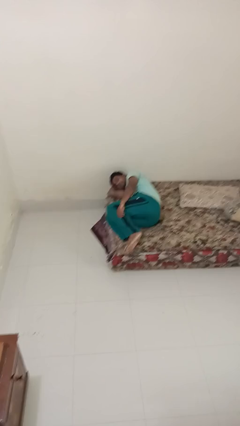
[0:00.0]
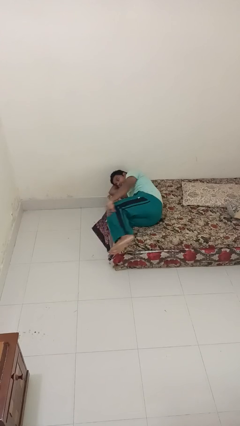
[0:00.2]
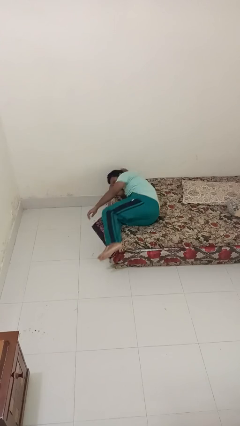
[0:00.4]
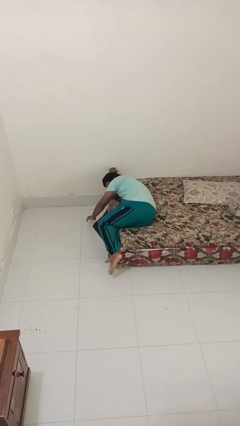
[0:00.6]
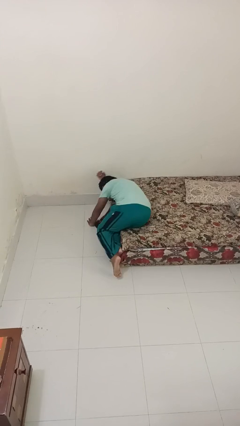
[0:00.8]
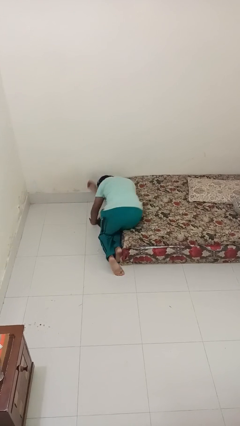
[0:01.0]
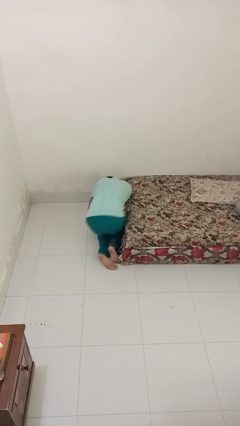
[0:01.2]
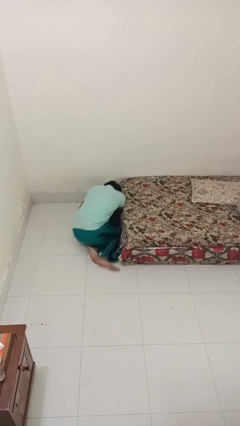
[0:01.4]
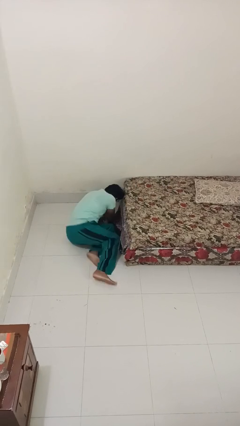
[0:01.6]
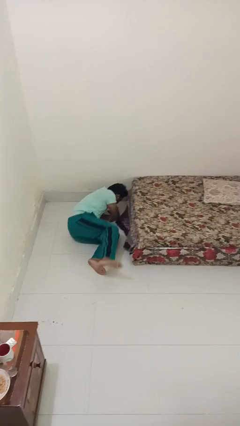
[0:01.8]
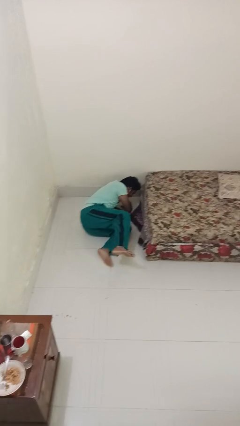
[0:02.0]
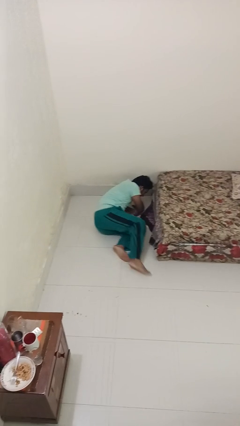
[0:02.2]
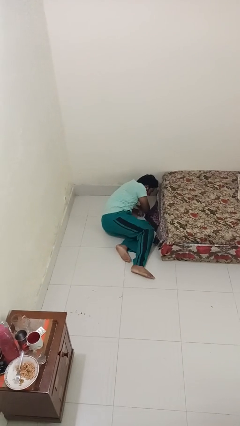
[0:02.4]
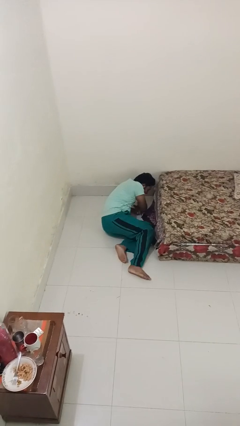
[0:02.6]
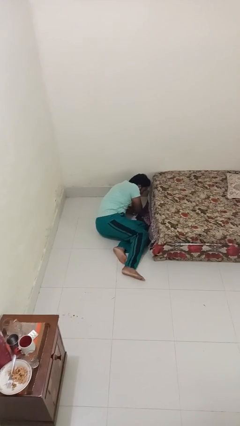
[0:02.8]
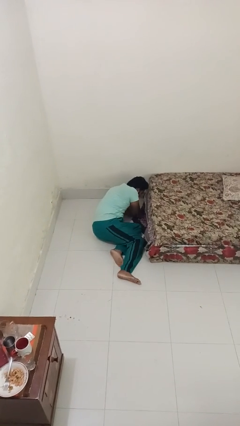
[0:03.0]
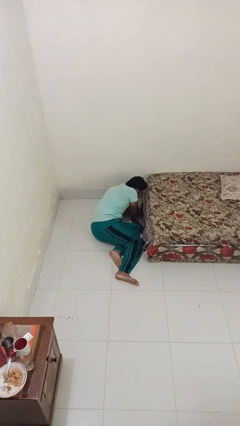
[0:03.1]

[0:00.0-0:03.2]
person falls from bed

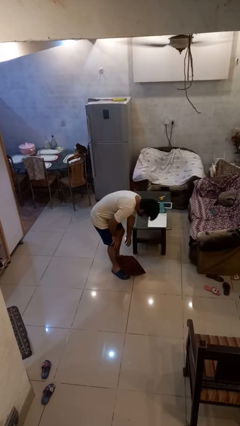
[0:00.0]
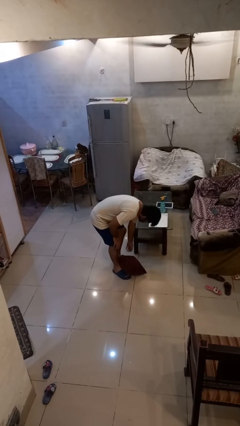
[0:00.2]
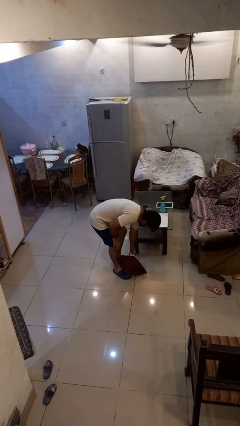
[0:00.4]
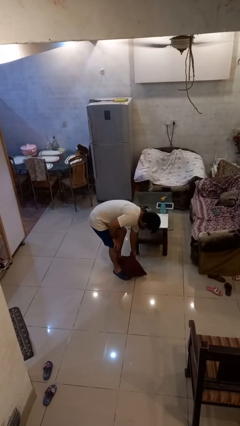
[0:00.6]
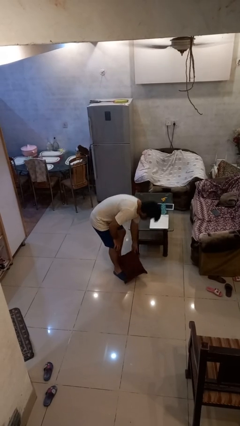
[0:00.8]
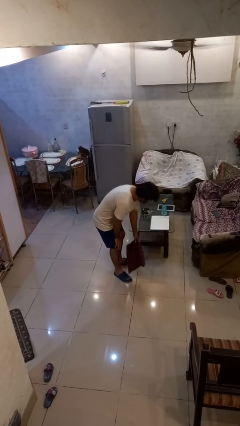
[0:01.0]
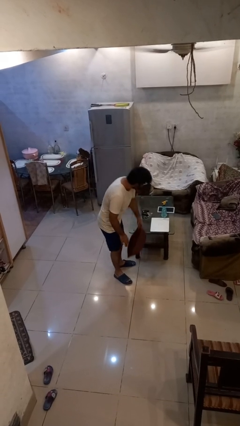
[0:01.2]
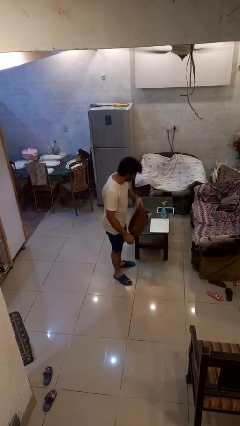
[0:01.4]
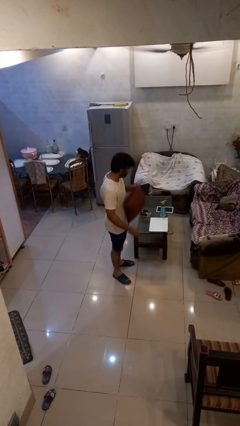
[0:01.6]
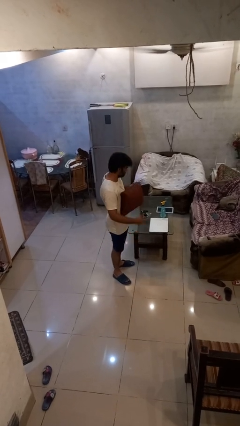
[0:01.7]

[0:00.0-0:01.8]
person picks up object from floor

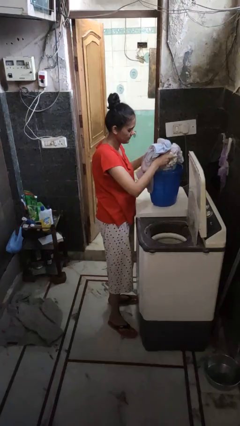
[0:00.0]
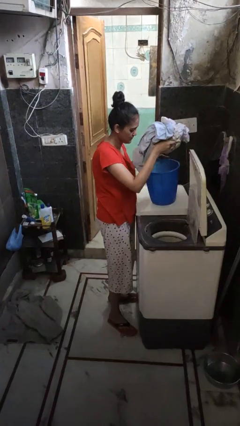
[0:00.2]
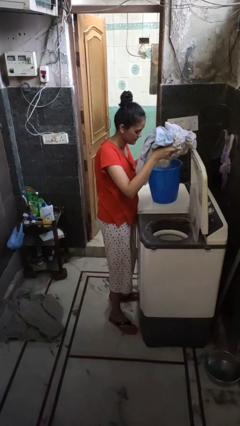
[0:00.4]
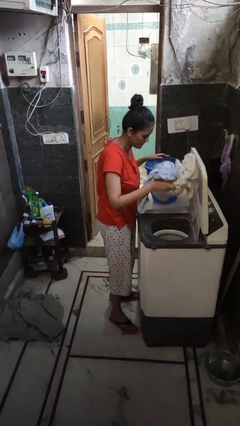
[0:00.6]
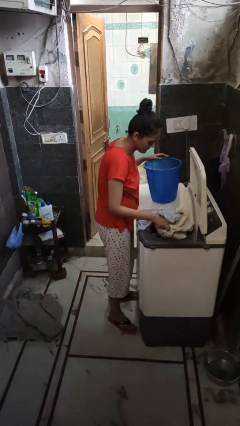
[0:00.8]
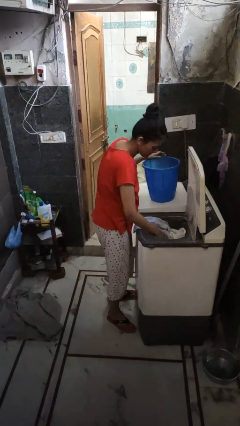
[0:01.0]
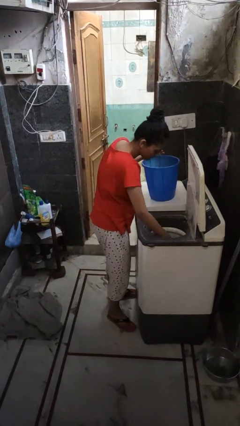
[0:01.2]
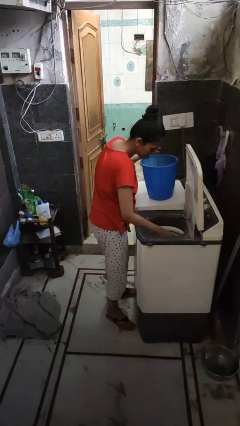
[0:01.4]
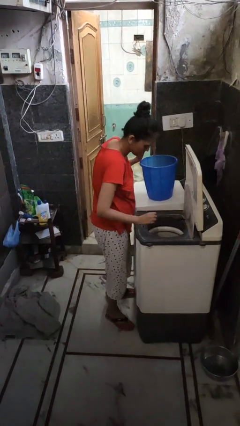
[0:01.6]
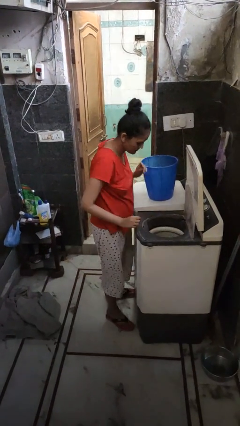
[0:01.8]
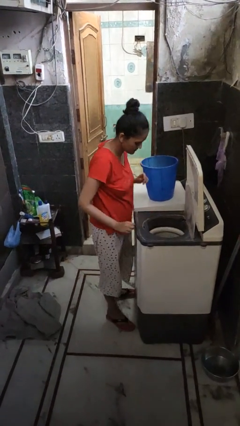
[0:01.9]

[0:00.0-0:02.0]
person loads clotheswasher

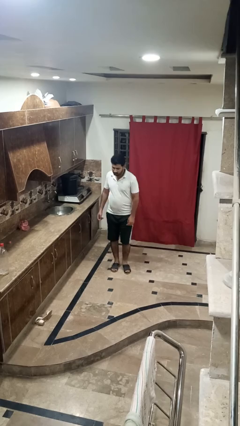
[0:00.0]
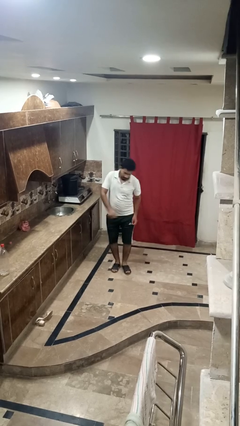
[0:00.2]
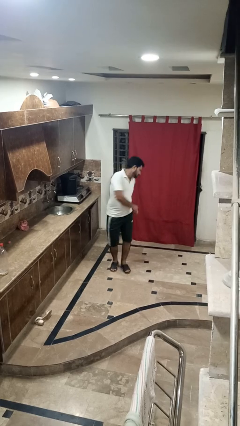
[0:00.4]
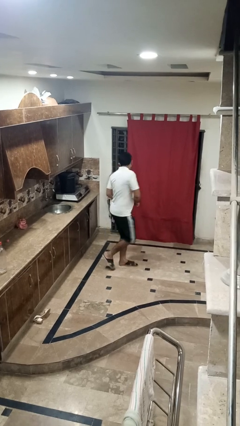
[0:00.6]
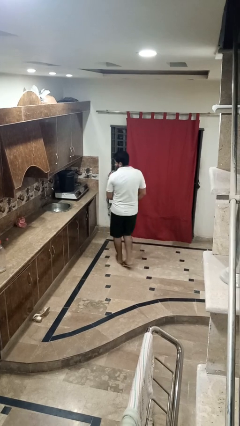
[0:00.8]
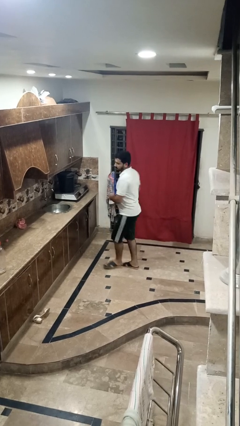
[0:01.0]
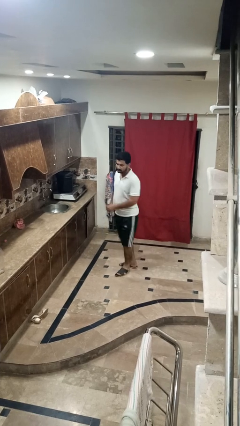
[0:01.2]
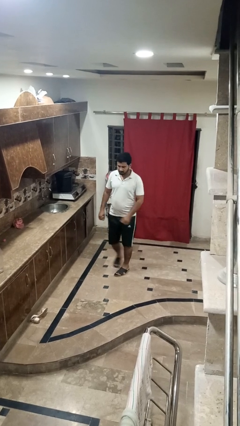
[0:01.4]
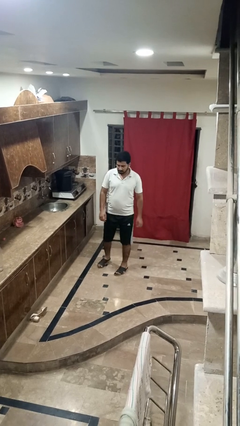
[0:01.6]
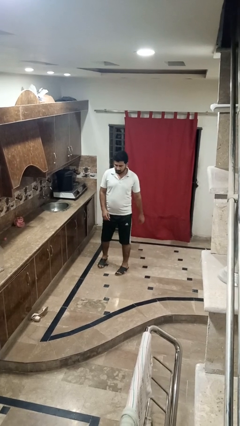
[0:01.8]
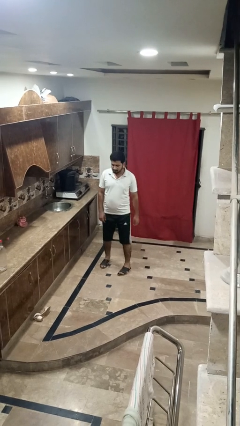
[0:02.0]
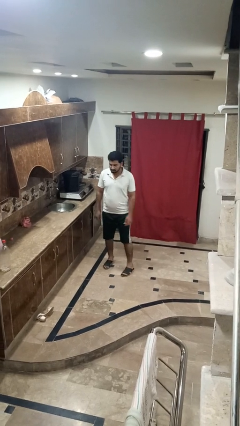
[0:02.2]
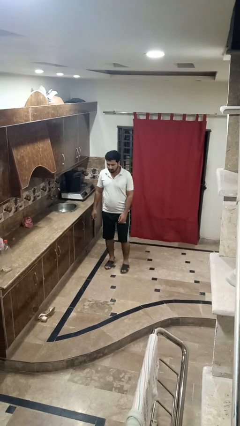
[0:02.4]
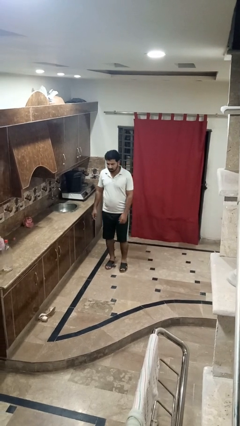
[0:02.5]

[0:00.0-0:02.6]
person twirls

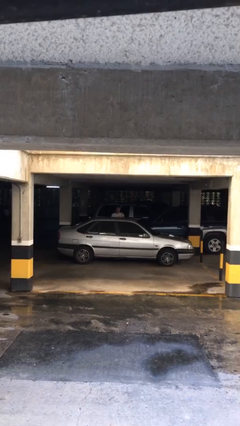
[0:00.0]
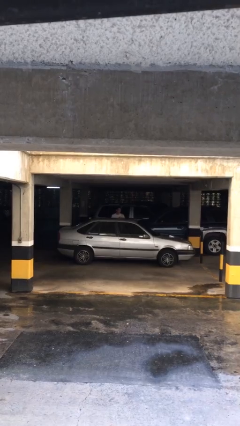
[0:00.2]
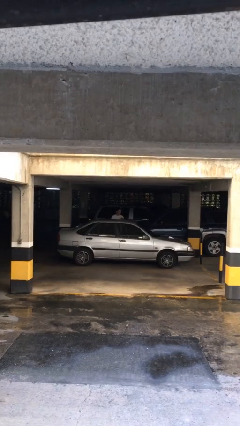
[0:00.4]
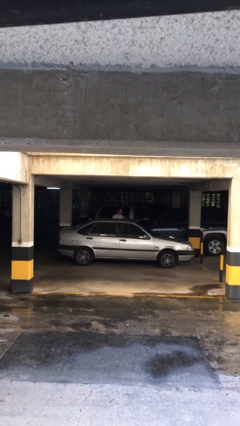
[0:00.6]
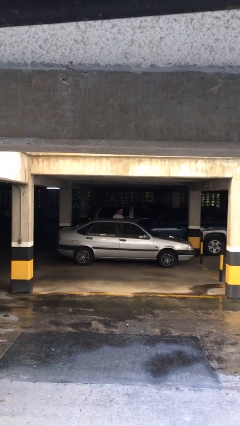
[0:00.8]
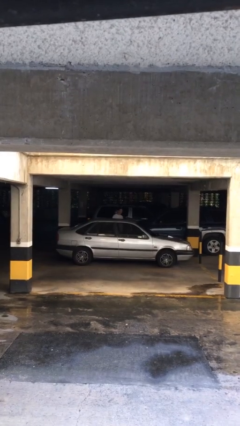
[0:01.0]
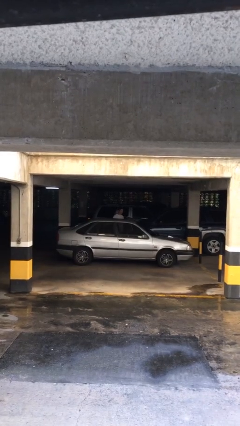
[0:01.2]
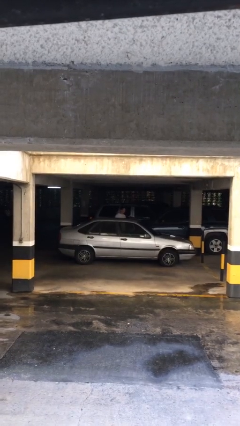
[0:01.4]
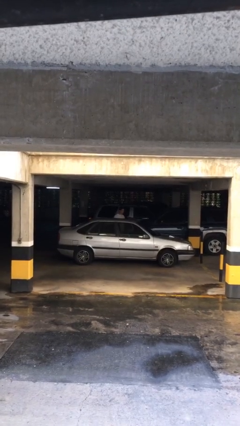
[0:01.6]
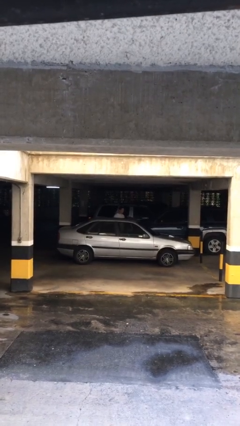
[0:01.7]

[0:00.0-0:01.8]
person opens car door

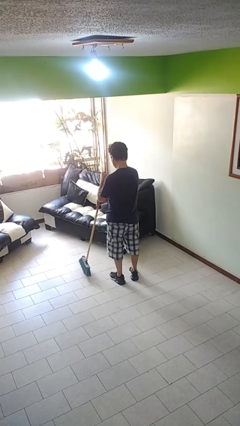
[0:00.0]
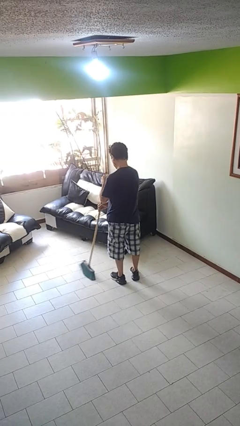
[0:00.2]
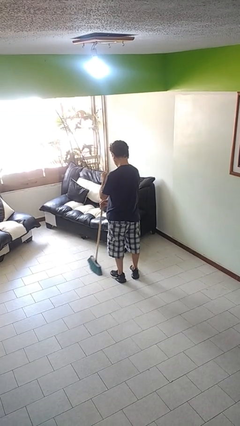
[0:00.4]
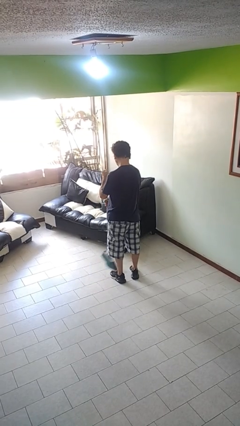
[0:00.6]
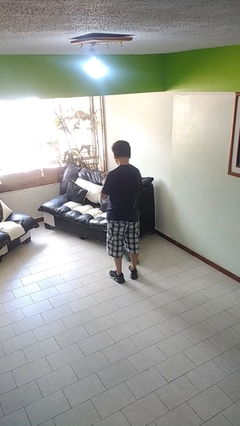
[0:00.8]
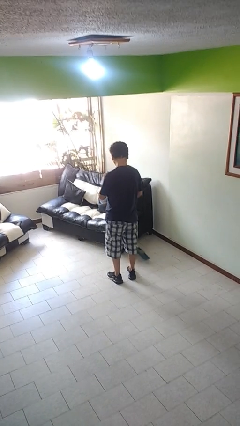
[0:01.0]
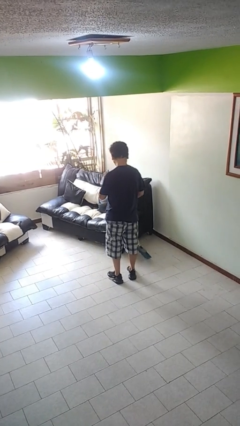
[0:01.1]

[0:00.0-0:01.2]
person sweeps floor

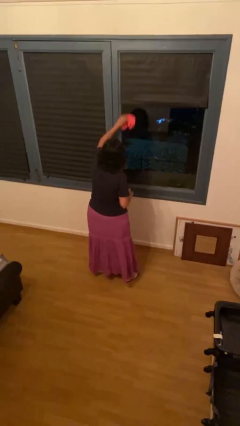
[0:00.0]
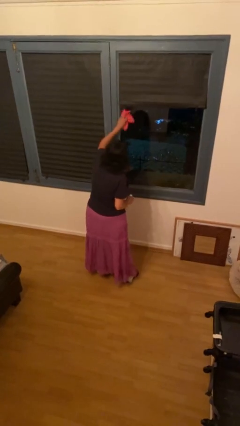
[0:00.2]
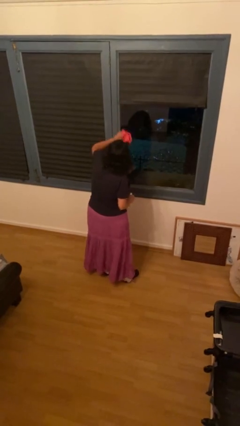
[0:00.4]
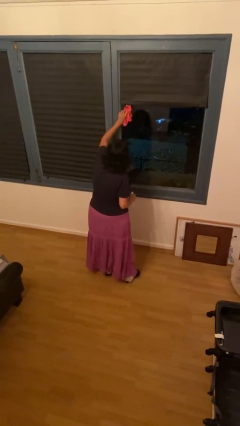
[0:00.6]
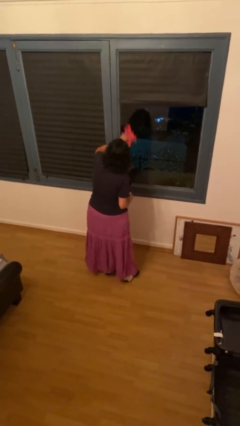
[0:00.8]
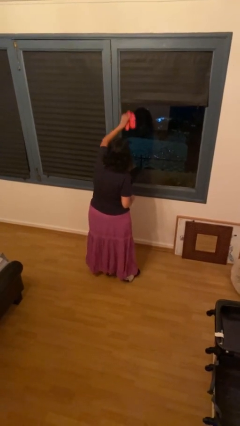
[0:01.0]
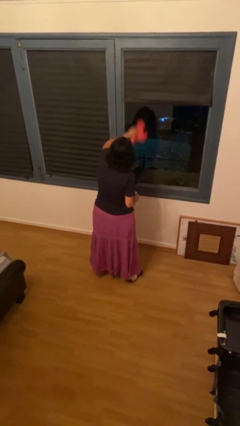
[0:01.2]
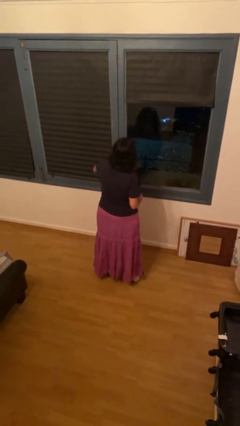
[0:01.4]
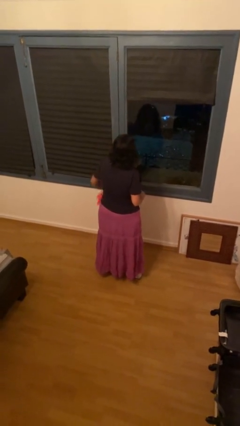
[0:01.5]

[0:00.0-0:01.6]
person washes window

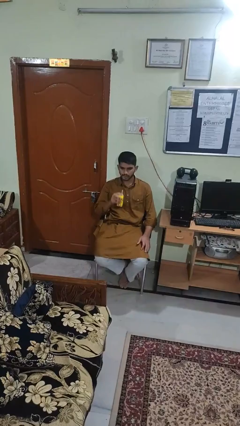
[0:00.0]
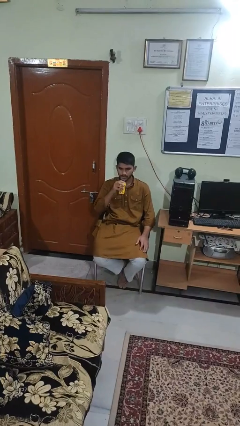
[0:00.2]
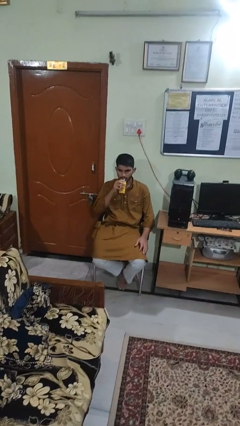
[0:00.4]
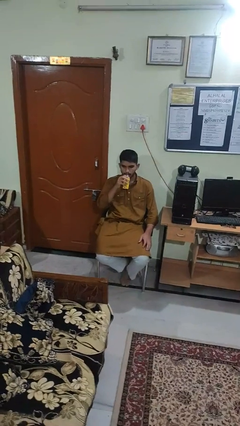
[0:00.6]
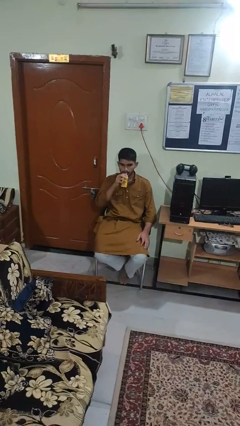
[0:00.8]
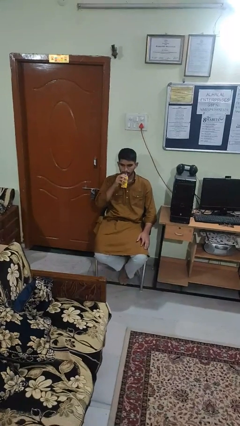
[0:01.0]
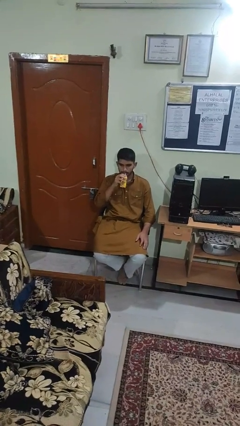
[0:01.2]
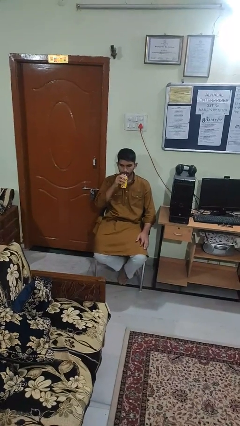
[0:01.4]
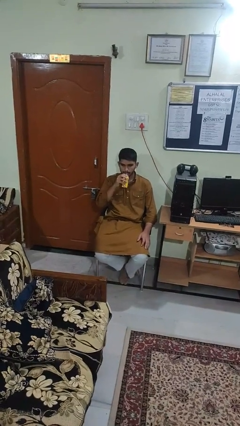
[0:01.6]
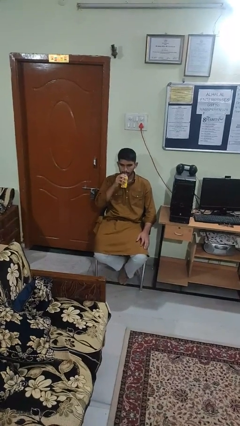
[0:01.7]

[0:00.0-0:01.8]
person drinks from straw

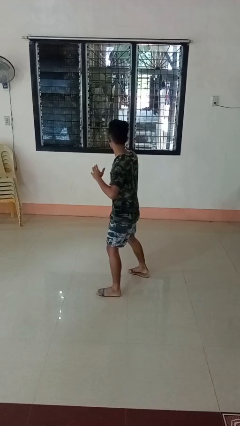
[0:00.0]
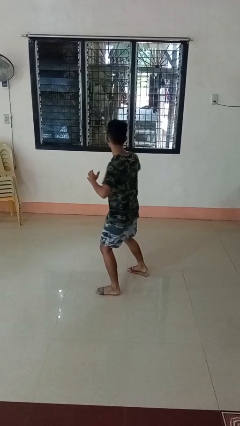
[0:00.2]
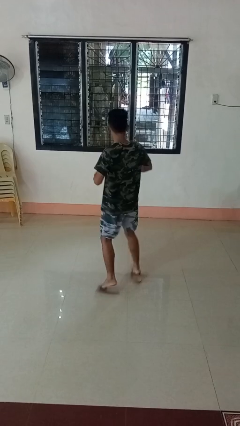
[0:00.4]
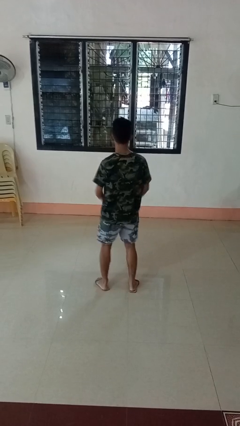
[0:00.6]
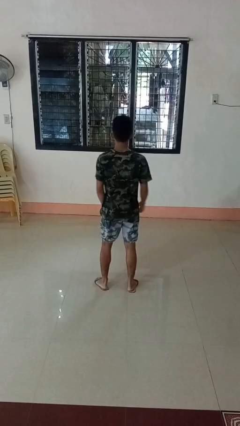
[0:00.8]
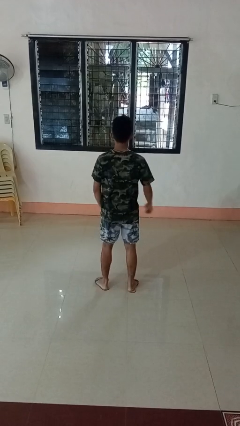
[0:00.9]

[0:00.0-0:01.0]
person karate chop
